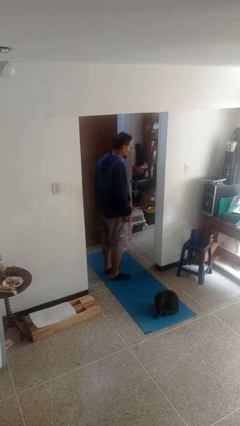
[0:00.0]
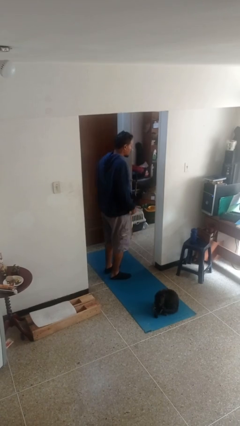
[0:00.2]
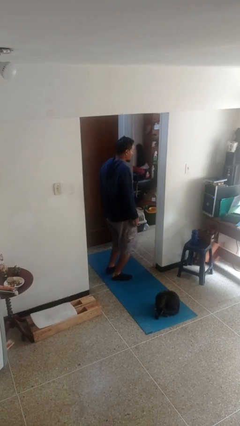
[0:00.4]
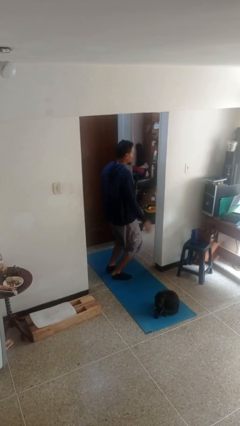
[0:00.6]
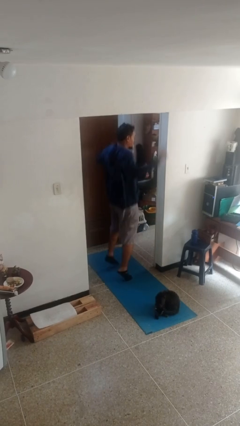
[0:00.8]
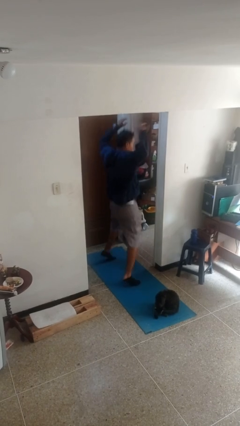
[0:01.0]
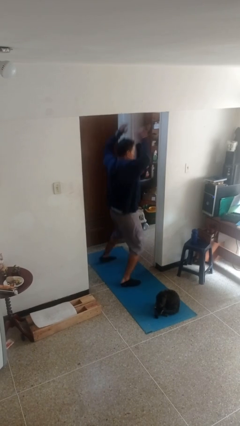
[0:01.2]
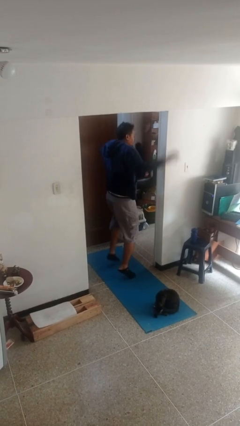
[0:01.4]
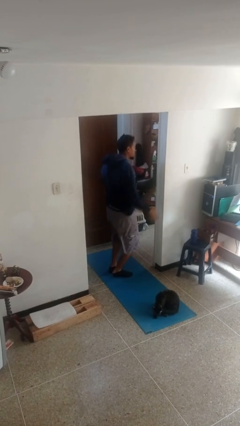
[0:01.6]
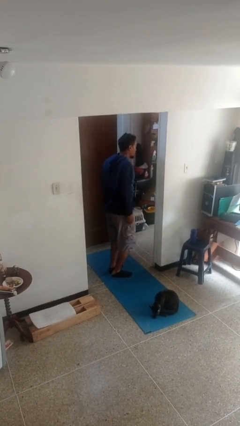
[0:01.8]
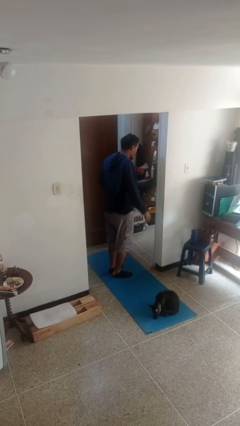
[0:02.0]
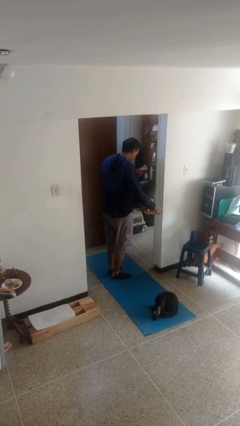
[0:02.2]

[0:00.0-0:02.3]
person exercises with jumping jacks

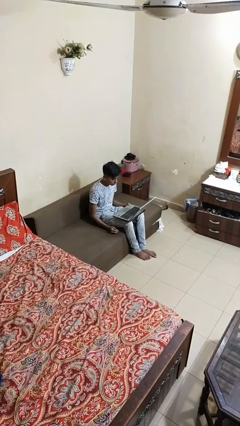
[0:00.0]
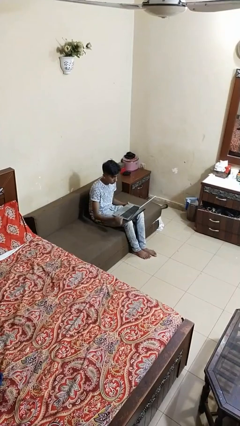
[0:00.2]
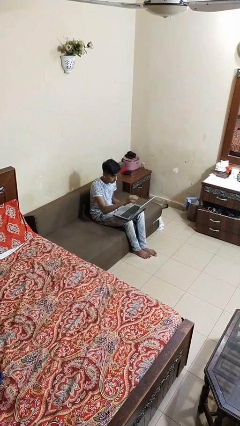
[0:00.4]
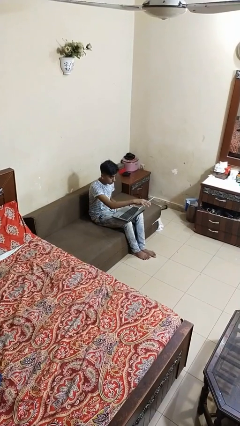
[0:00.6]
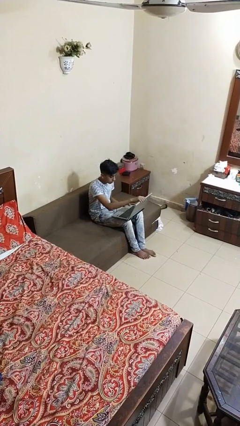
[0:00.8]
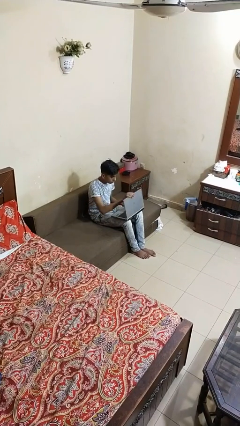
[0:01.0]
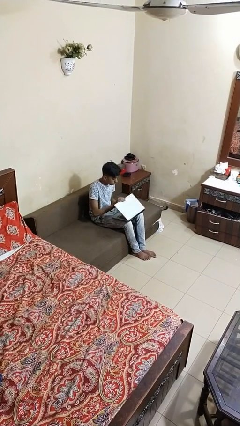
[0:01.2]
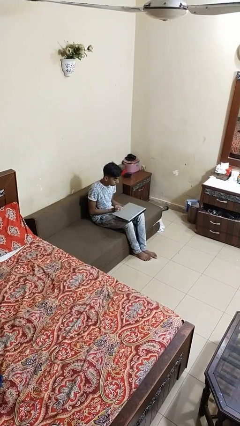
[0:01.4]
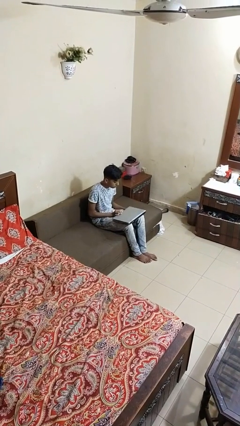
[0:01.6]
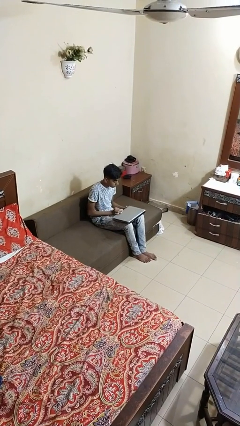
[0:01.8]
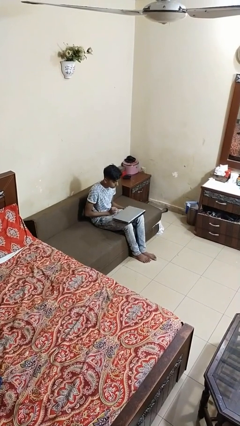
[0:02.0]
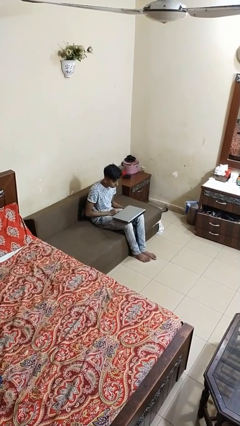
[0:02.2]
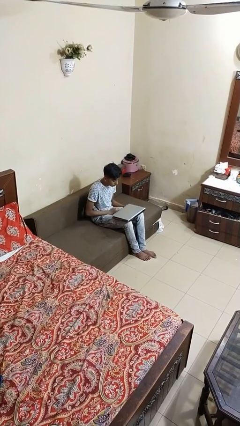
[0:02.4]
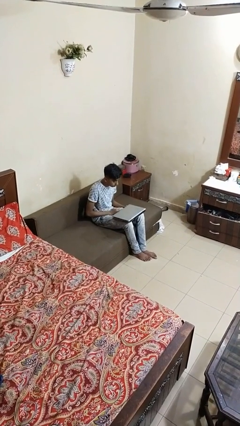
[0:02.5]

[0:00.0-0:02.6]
person closes laptop

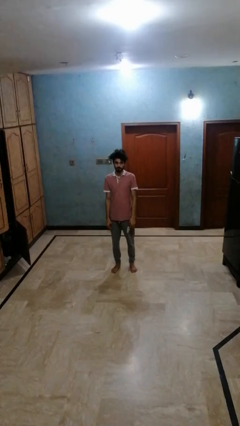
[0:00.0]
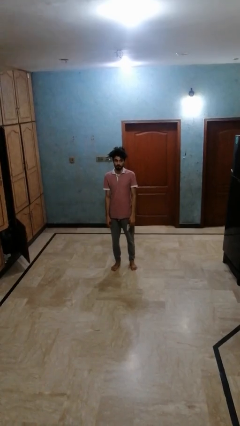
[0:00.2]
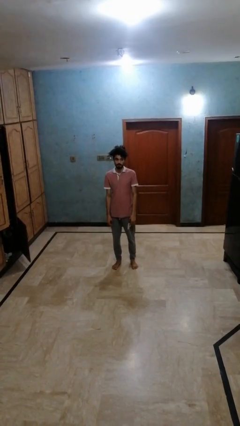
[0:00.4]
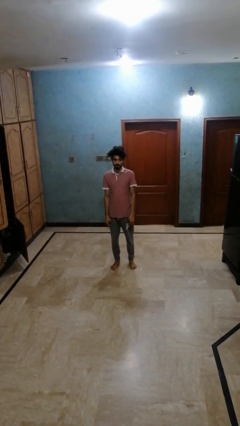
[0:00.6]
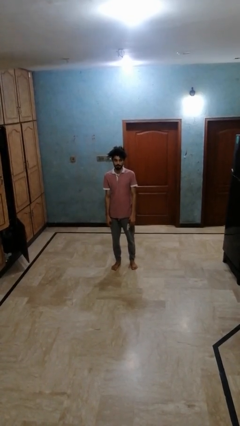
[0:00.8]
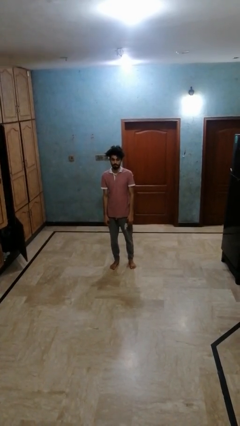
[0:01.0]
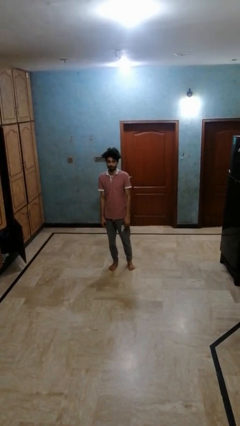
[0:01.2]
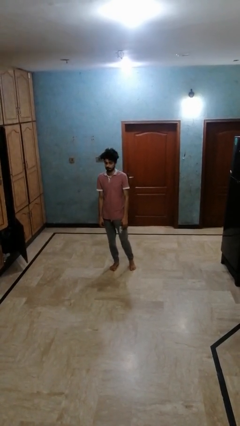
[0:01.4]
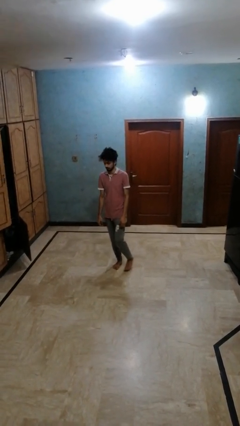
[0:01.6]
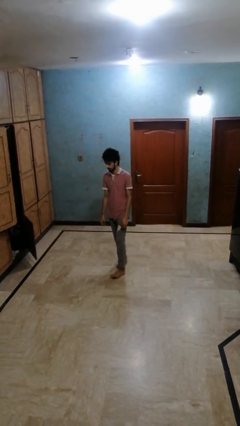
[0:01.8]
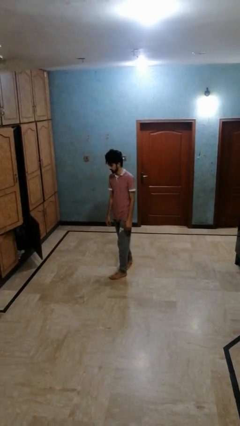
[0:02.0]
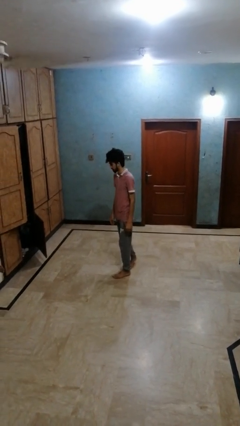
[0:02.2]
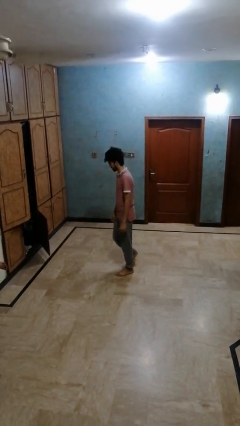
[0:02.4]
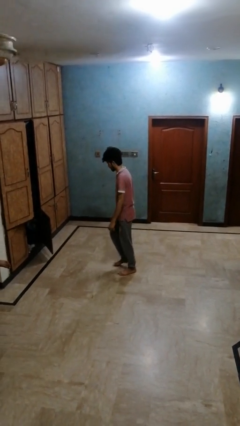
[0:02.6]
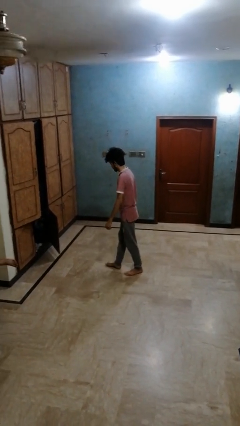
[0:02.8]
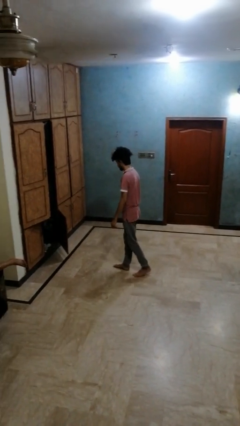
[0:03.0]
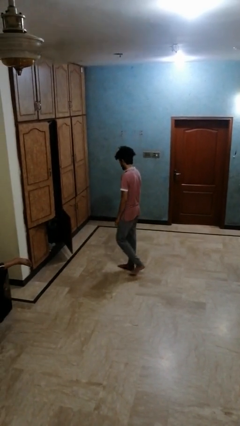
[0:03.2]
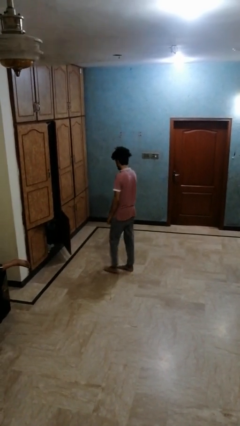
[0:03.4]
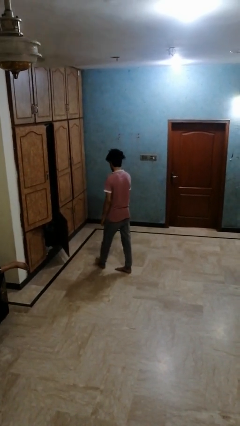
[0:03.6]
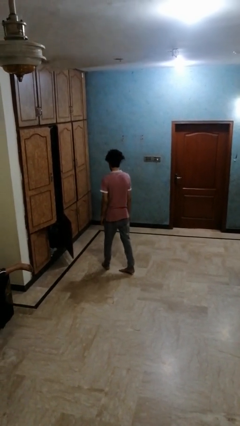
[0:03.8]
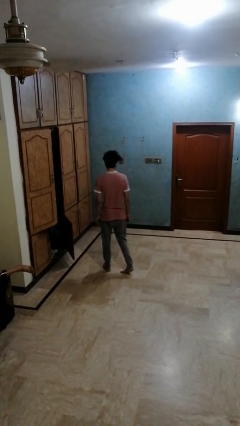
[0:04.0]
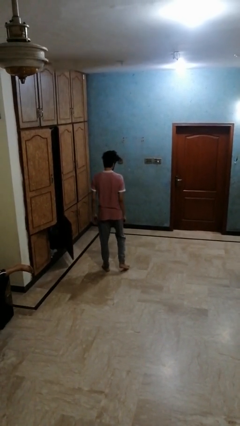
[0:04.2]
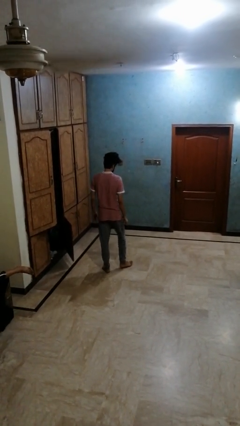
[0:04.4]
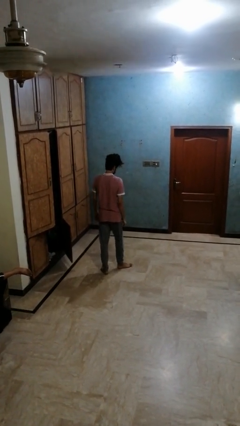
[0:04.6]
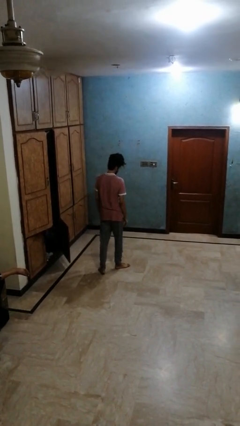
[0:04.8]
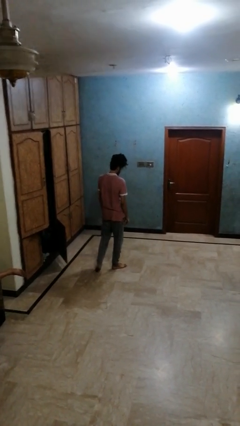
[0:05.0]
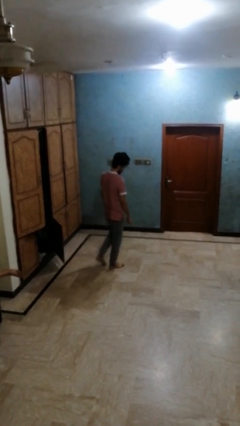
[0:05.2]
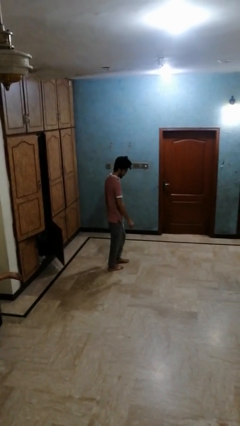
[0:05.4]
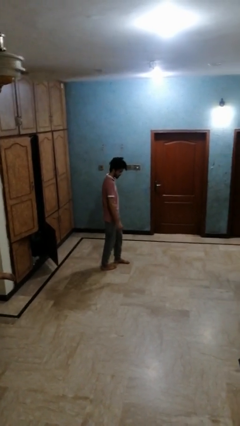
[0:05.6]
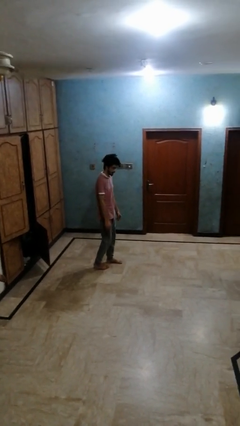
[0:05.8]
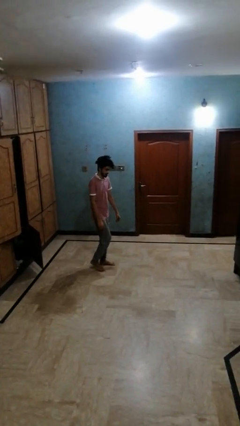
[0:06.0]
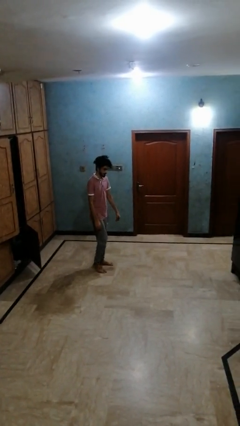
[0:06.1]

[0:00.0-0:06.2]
person twirls

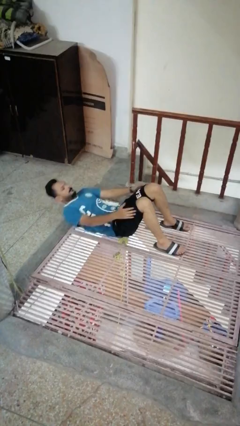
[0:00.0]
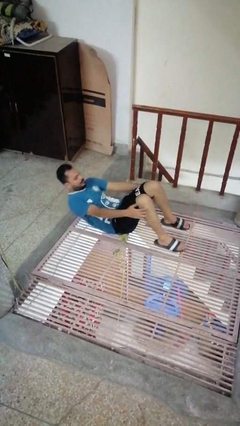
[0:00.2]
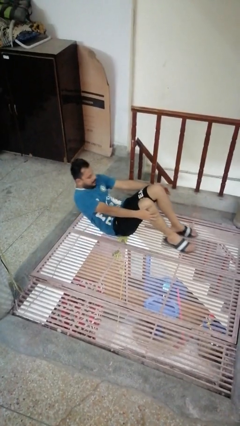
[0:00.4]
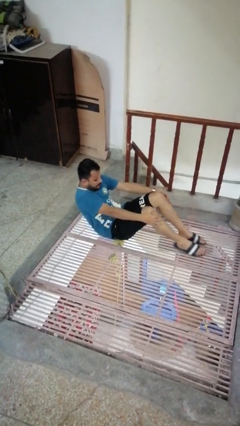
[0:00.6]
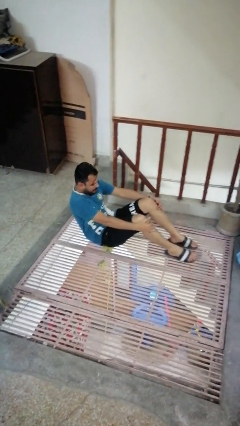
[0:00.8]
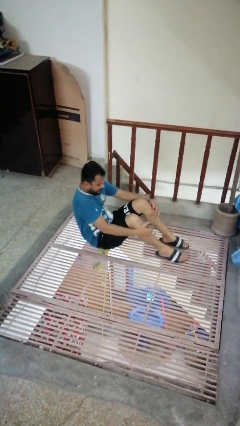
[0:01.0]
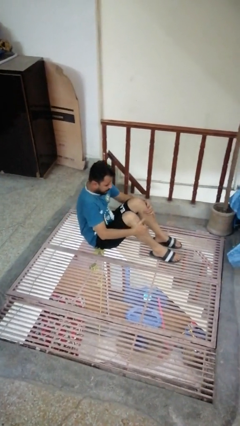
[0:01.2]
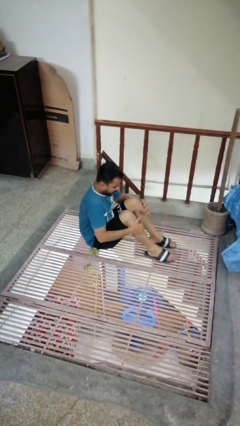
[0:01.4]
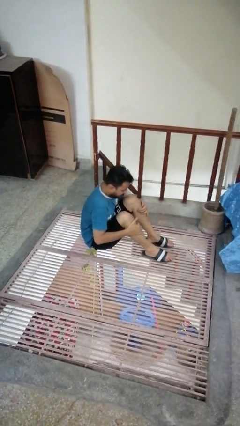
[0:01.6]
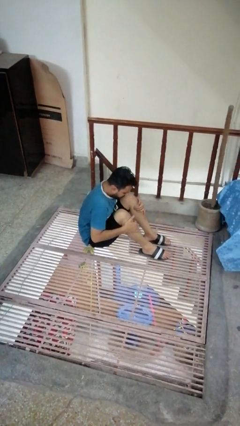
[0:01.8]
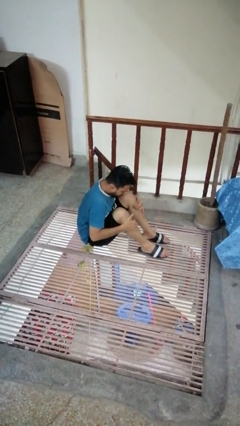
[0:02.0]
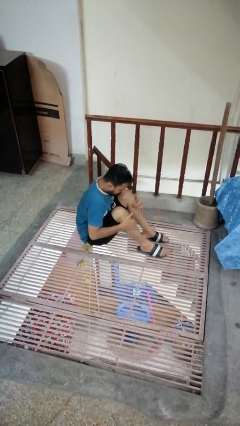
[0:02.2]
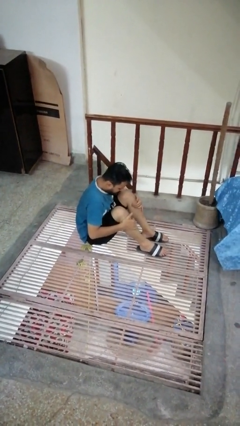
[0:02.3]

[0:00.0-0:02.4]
person exercises with situp

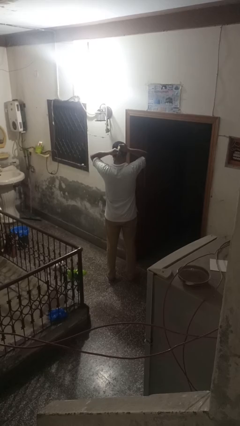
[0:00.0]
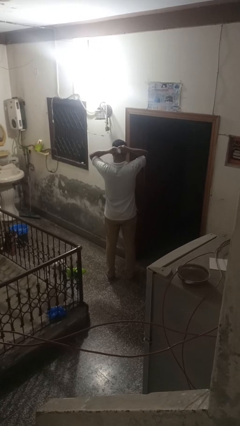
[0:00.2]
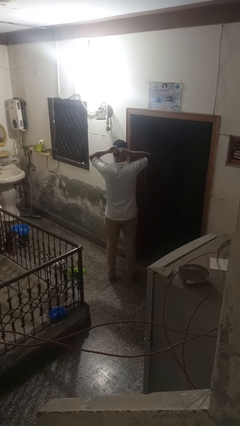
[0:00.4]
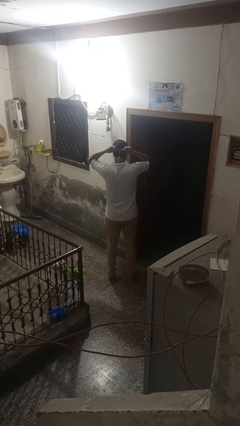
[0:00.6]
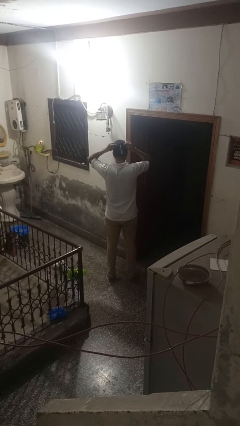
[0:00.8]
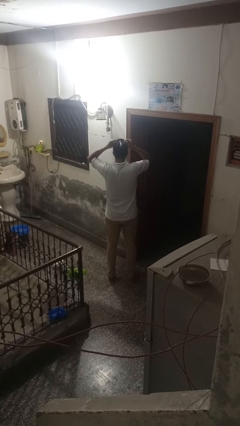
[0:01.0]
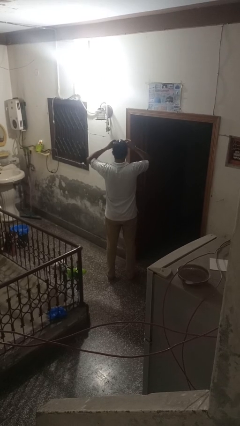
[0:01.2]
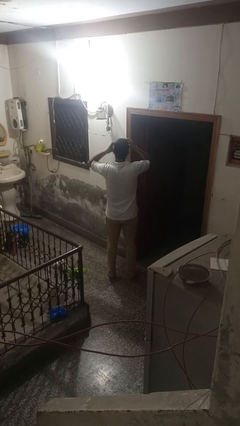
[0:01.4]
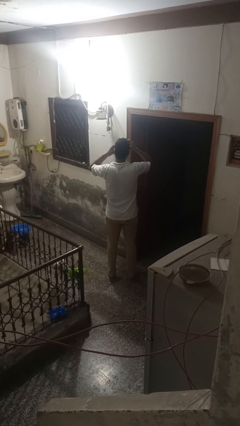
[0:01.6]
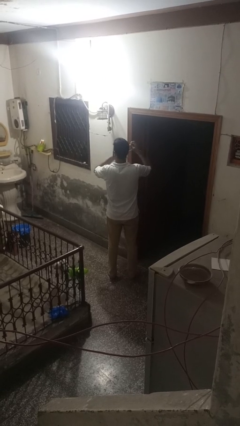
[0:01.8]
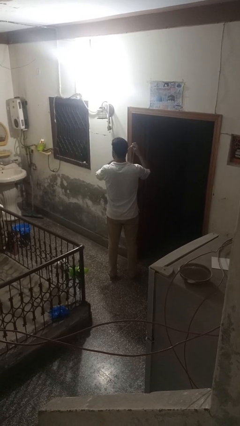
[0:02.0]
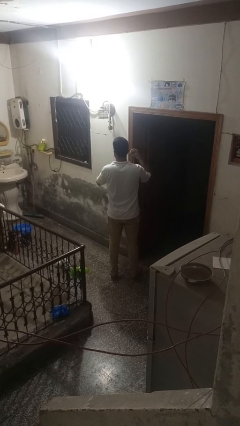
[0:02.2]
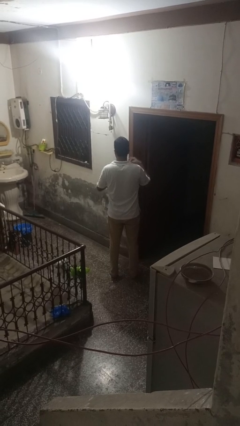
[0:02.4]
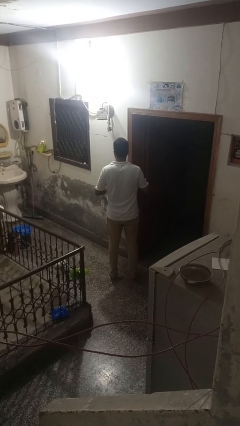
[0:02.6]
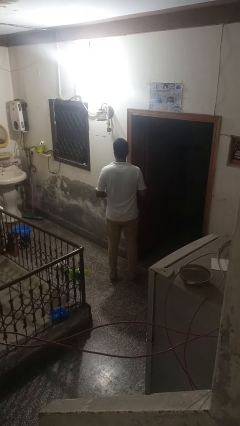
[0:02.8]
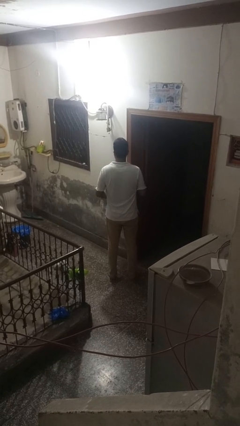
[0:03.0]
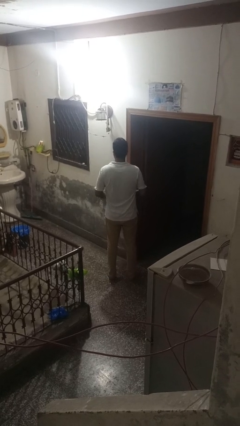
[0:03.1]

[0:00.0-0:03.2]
person takes off necklace

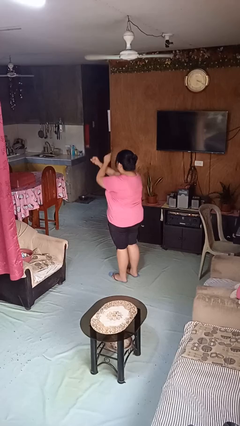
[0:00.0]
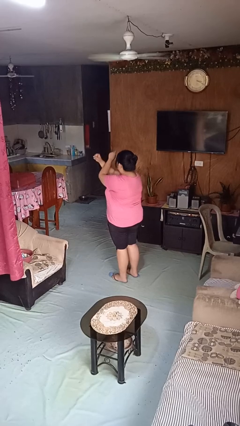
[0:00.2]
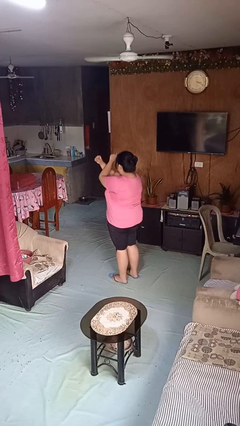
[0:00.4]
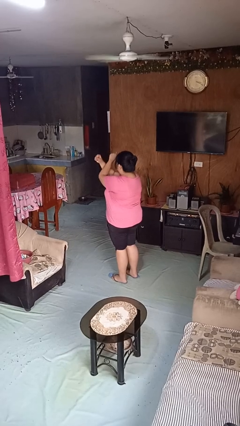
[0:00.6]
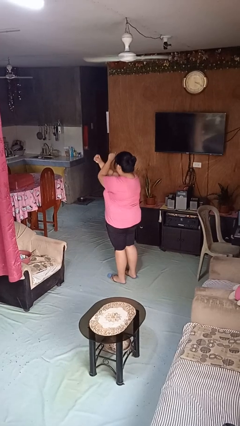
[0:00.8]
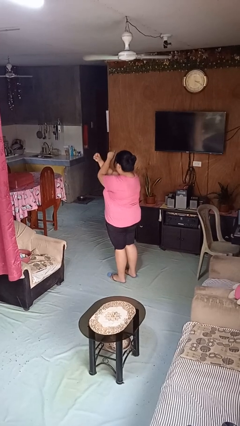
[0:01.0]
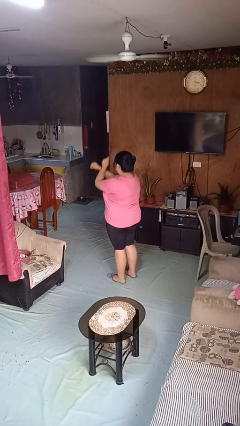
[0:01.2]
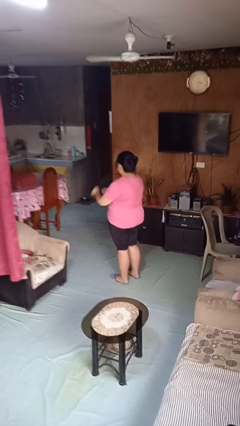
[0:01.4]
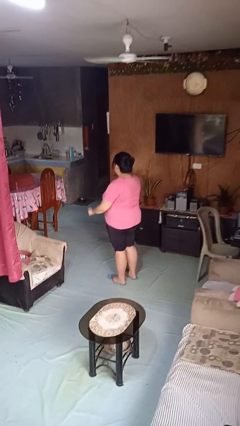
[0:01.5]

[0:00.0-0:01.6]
person gestures arms x
